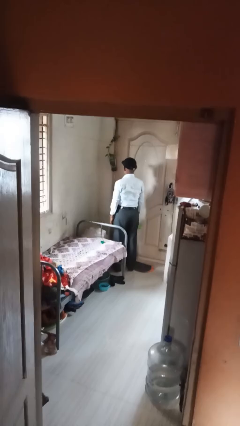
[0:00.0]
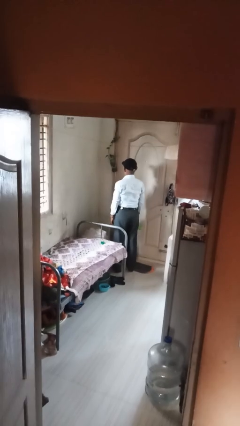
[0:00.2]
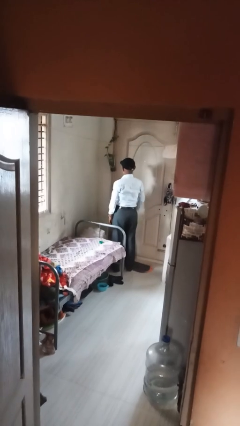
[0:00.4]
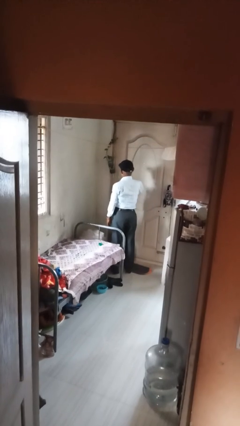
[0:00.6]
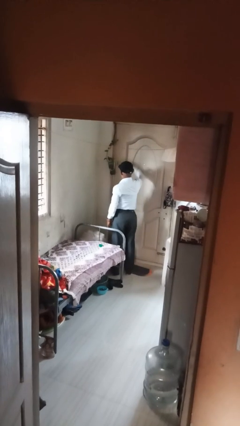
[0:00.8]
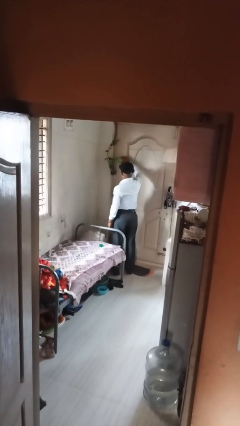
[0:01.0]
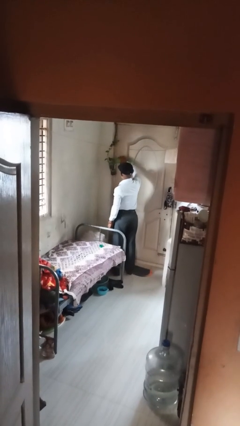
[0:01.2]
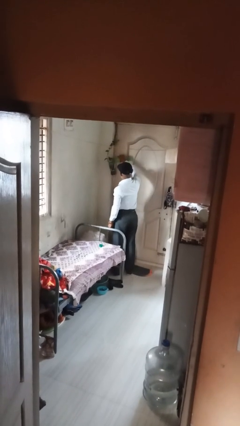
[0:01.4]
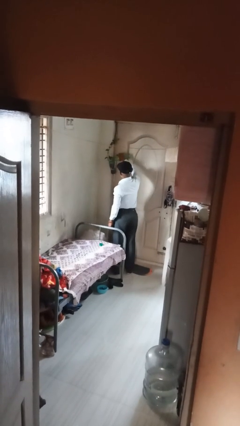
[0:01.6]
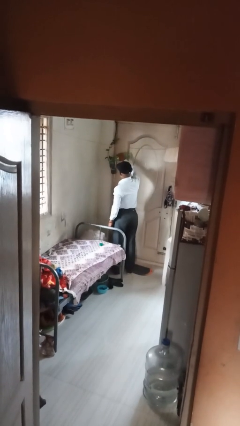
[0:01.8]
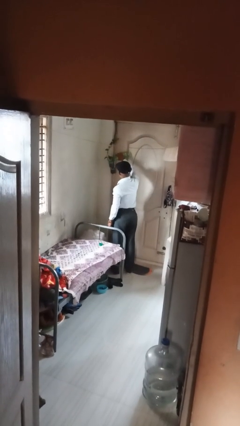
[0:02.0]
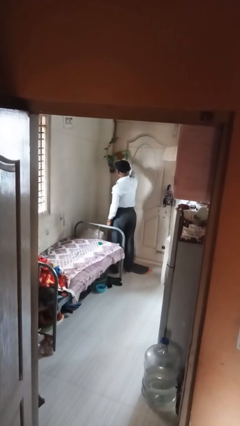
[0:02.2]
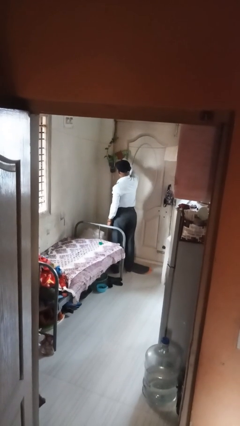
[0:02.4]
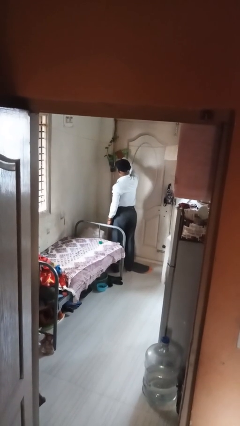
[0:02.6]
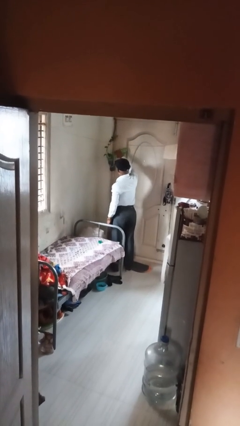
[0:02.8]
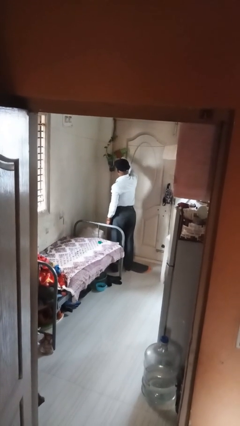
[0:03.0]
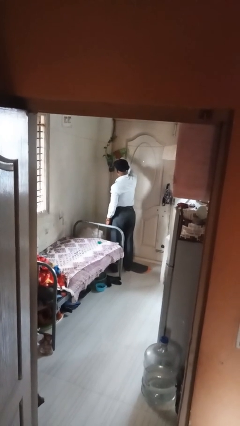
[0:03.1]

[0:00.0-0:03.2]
person waters houseplant

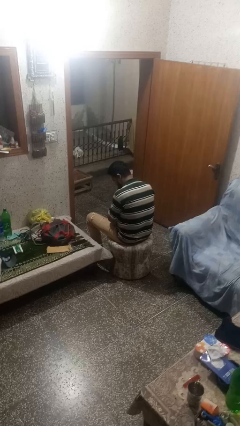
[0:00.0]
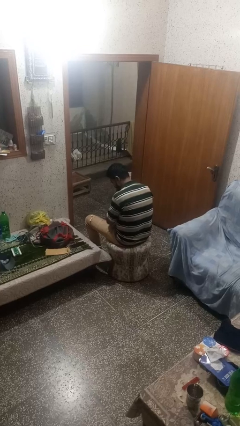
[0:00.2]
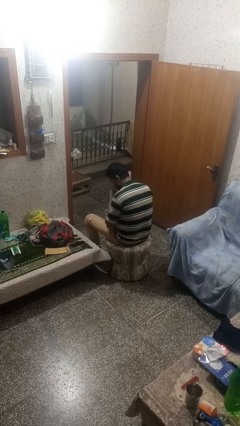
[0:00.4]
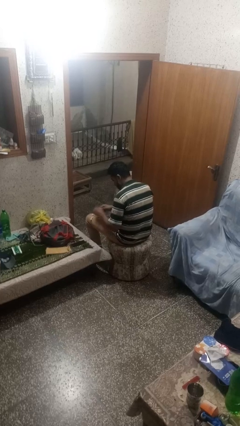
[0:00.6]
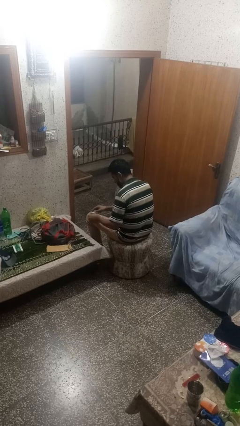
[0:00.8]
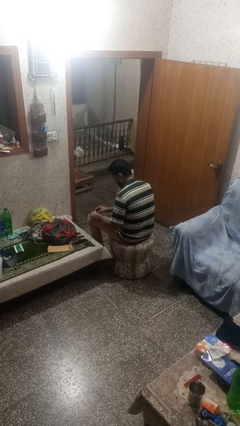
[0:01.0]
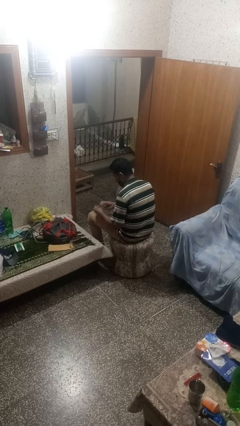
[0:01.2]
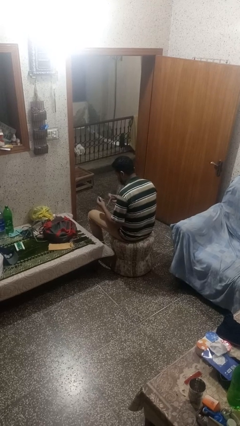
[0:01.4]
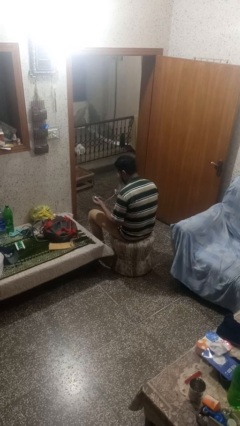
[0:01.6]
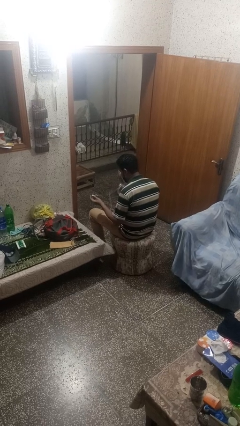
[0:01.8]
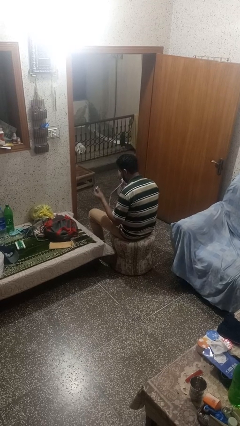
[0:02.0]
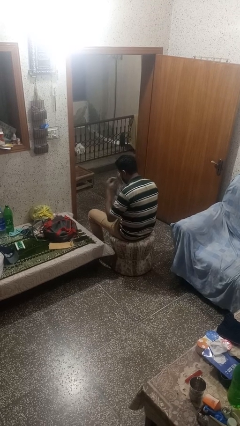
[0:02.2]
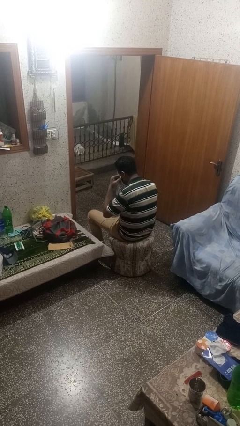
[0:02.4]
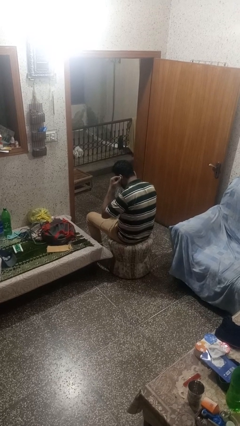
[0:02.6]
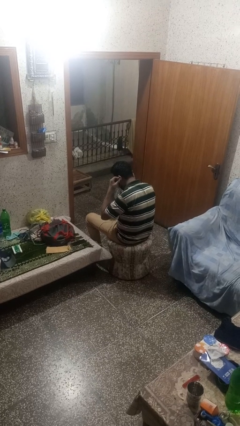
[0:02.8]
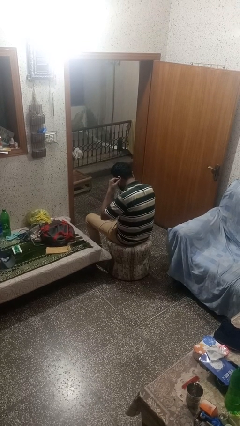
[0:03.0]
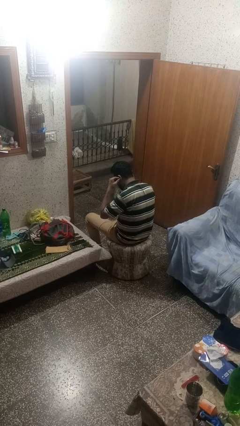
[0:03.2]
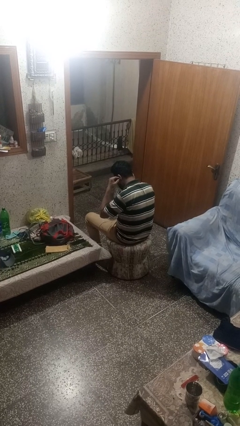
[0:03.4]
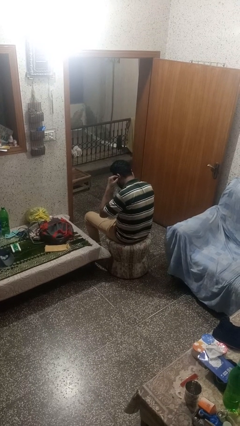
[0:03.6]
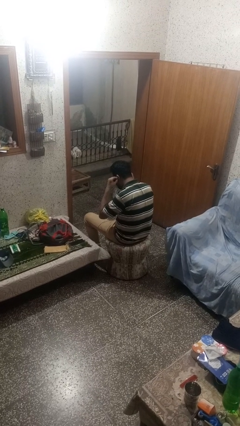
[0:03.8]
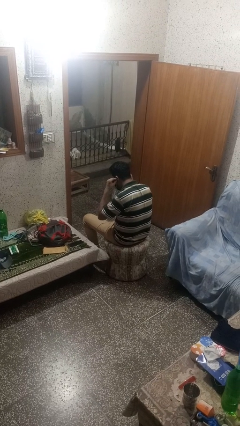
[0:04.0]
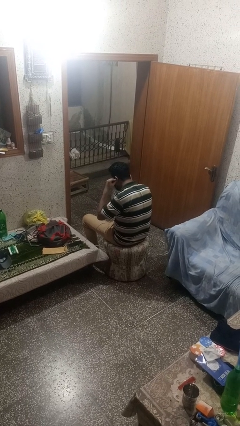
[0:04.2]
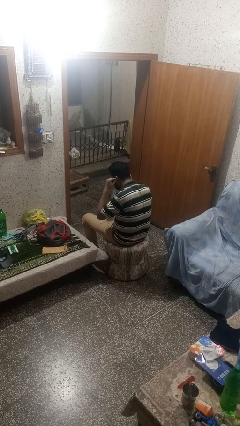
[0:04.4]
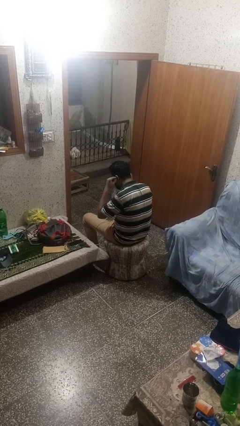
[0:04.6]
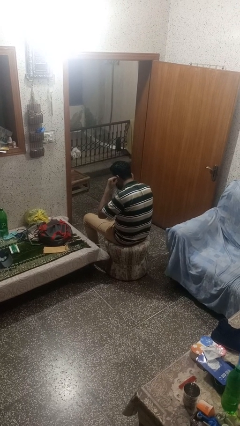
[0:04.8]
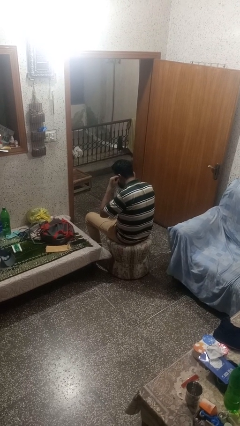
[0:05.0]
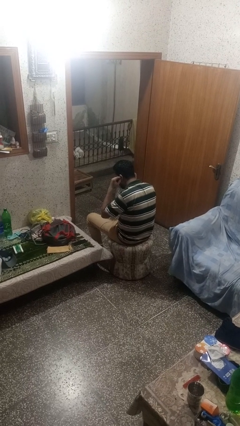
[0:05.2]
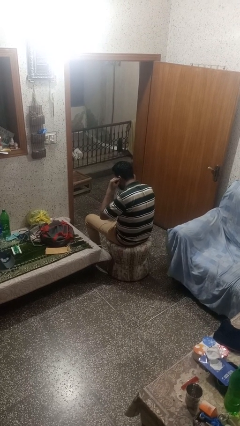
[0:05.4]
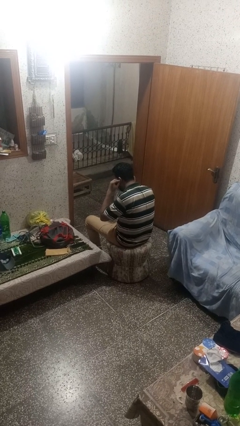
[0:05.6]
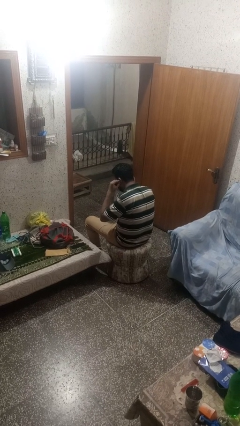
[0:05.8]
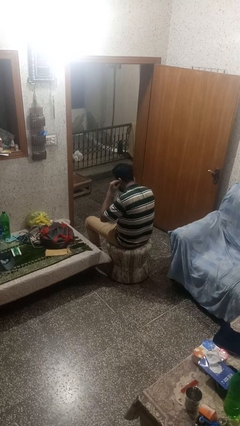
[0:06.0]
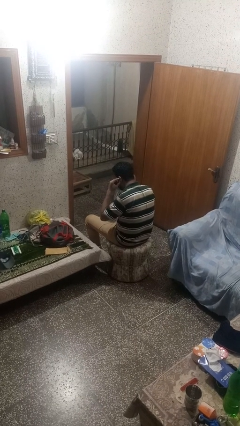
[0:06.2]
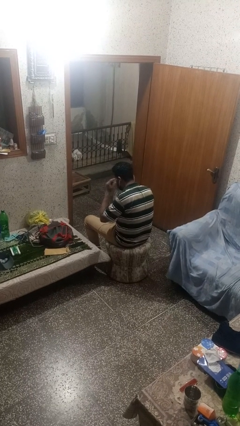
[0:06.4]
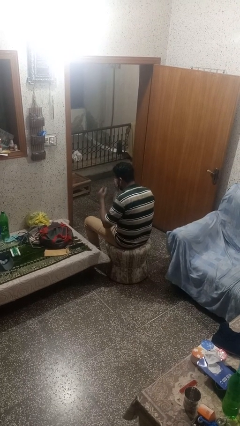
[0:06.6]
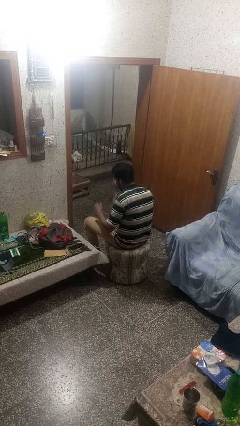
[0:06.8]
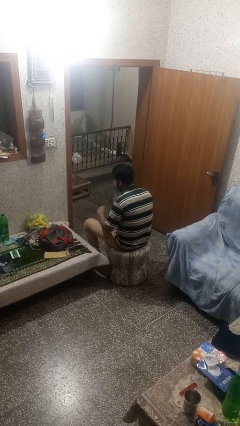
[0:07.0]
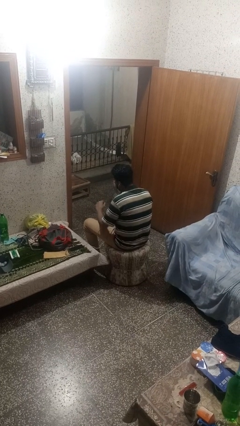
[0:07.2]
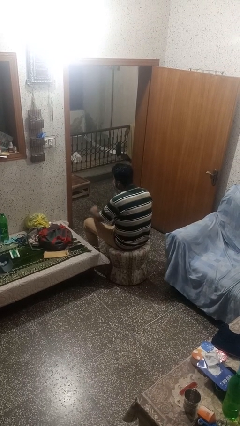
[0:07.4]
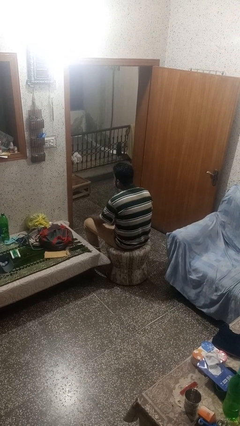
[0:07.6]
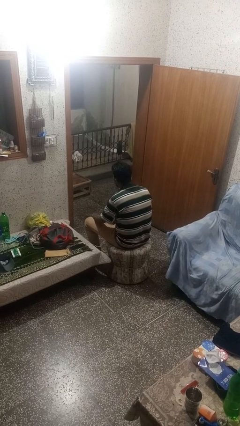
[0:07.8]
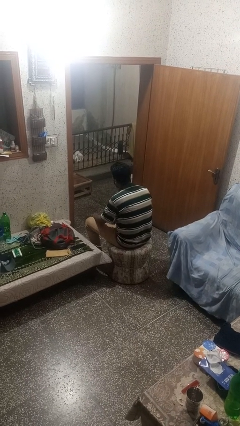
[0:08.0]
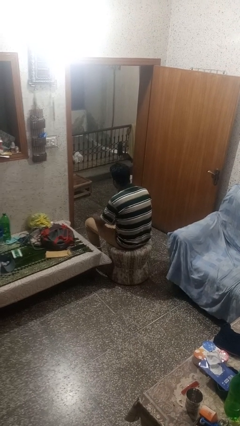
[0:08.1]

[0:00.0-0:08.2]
person puts on headphones

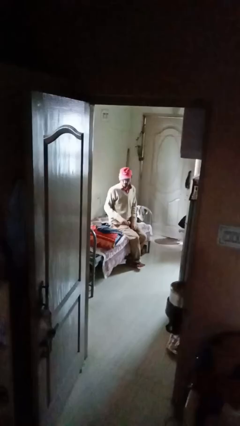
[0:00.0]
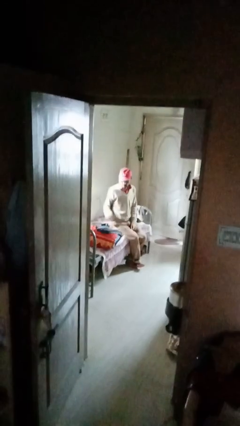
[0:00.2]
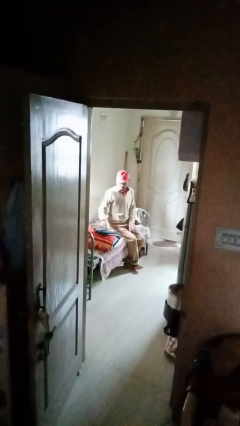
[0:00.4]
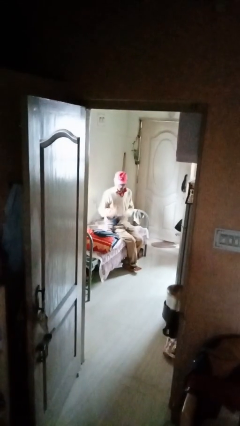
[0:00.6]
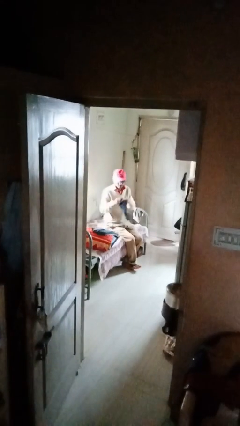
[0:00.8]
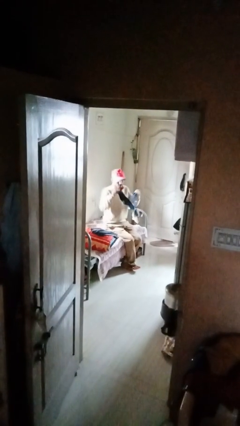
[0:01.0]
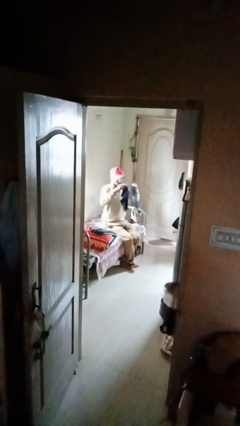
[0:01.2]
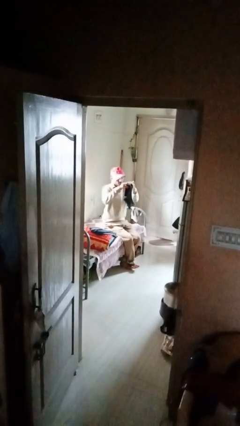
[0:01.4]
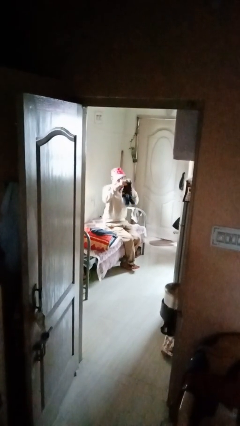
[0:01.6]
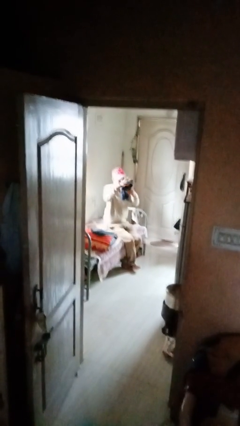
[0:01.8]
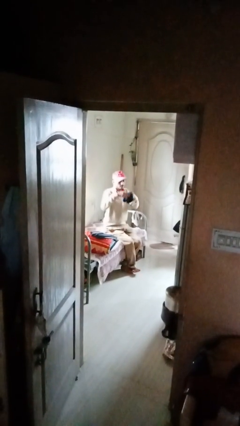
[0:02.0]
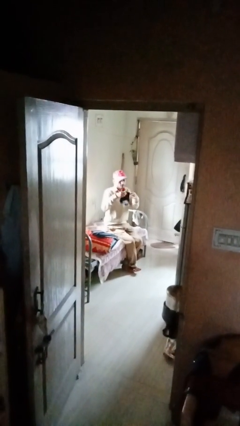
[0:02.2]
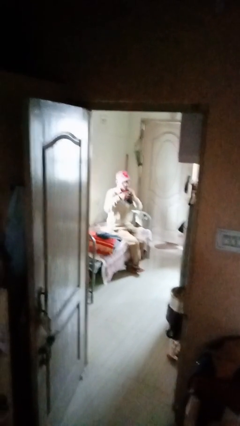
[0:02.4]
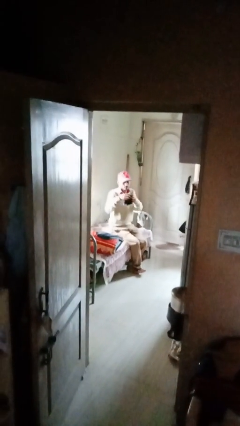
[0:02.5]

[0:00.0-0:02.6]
person folds socks

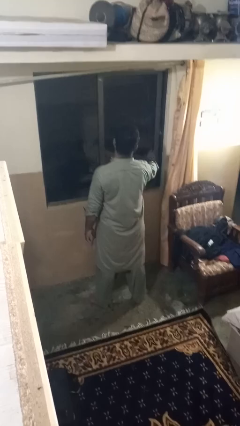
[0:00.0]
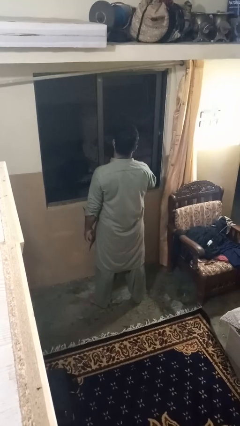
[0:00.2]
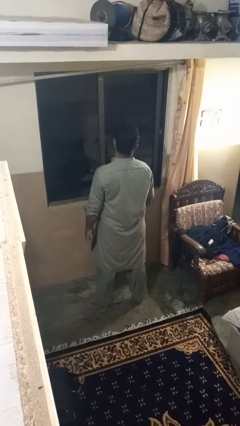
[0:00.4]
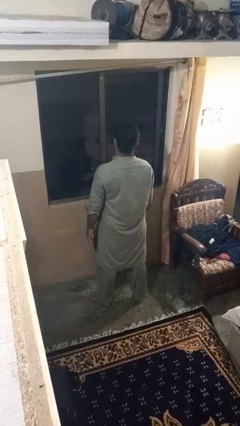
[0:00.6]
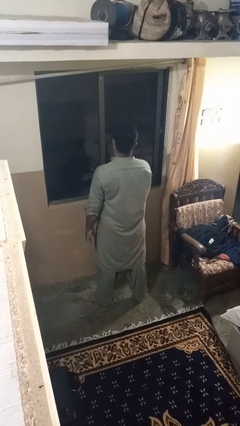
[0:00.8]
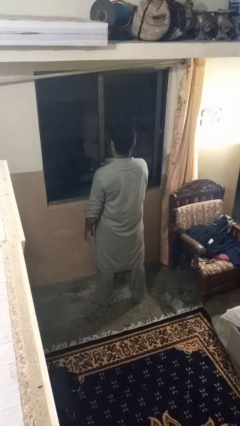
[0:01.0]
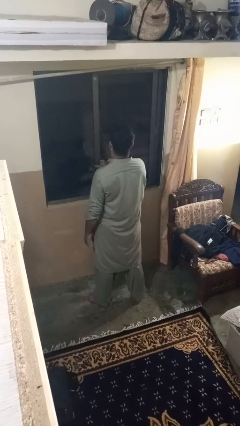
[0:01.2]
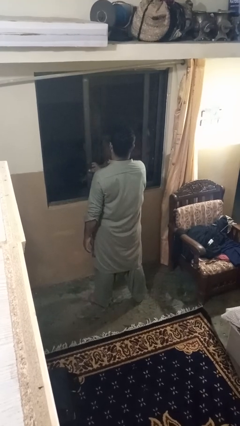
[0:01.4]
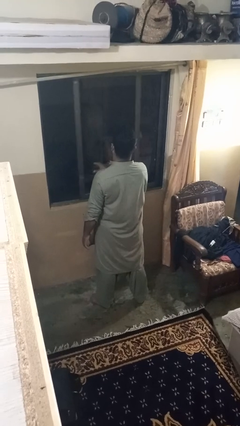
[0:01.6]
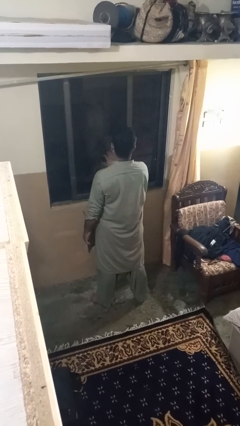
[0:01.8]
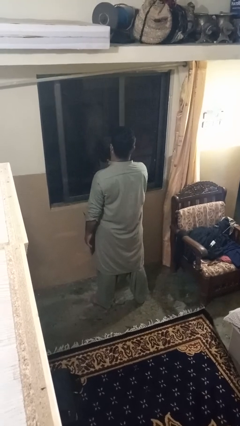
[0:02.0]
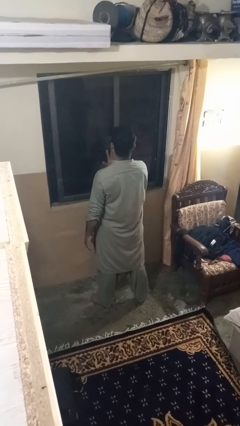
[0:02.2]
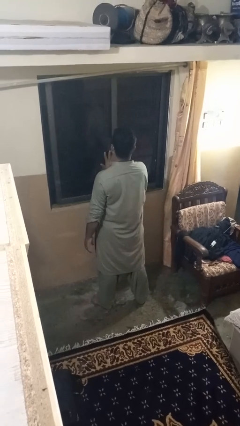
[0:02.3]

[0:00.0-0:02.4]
person closes home window

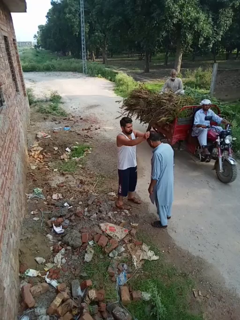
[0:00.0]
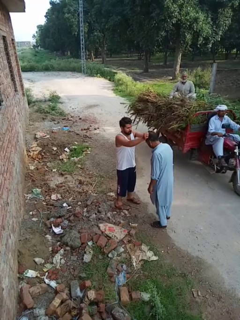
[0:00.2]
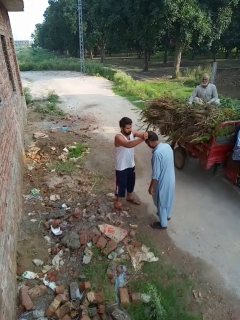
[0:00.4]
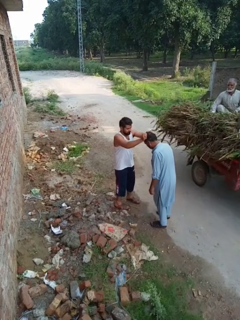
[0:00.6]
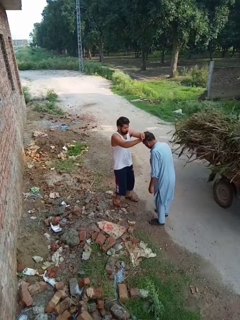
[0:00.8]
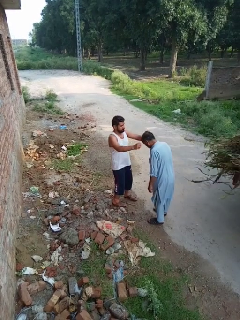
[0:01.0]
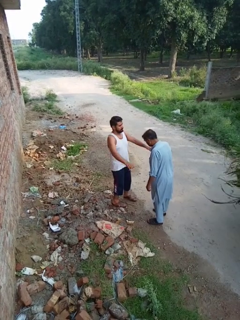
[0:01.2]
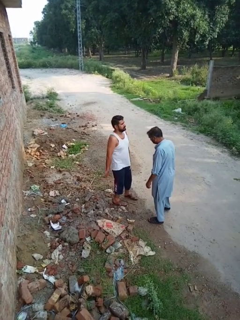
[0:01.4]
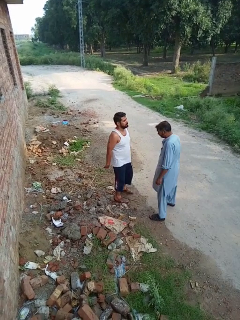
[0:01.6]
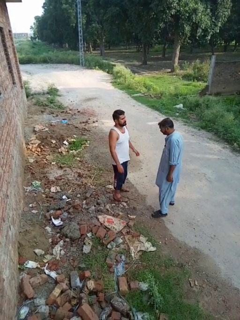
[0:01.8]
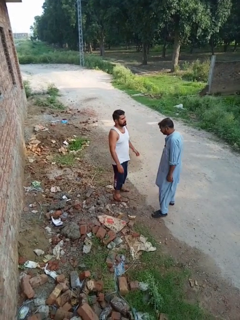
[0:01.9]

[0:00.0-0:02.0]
person grabs person by hair
